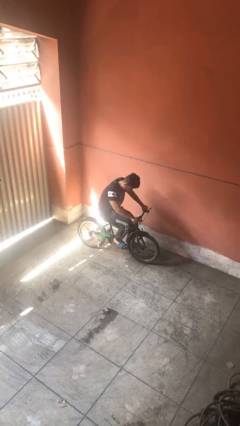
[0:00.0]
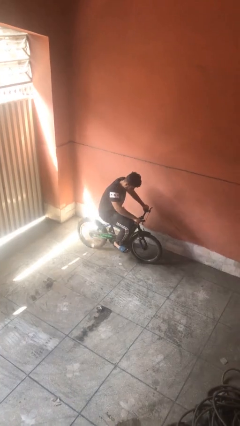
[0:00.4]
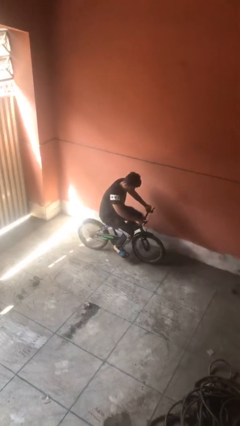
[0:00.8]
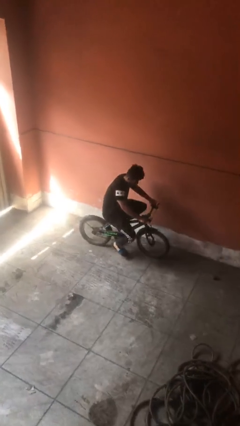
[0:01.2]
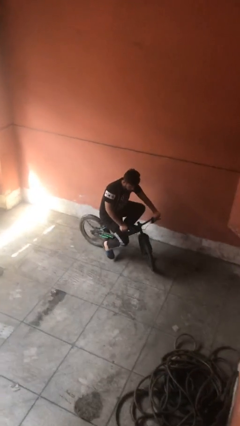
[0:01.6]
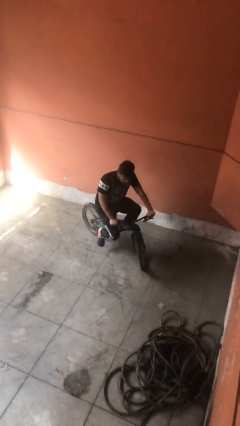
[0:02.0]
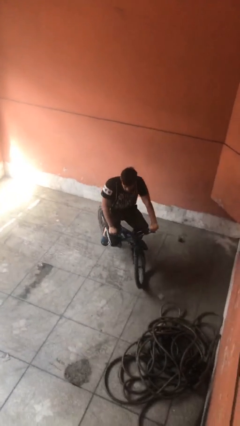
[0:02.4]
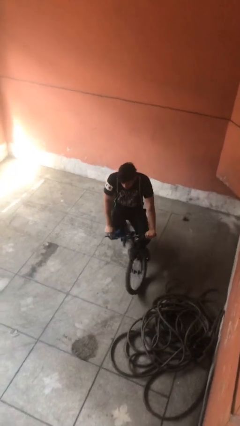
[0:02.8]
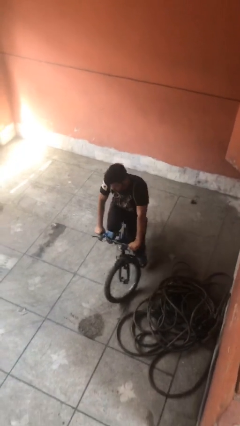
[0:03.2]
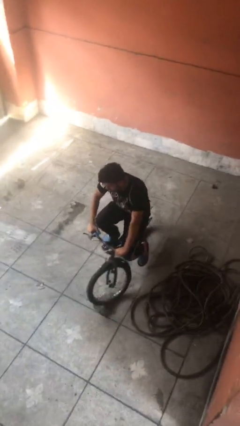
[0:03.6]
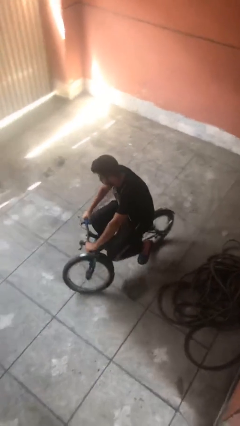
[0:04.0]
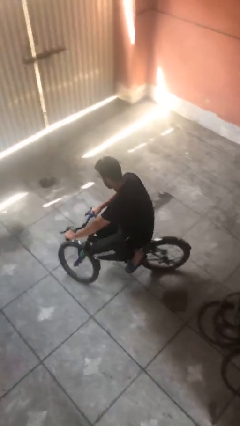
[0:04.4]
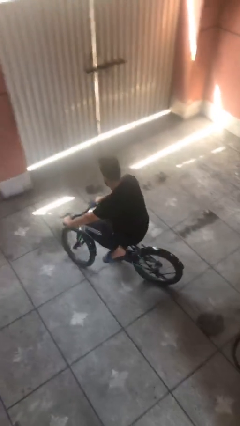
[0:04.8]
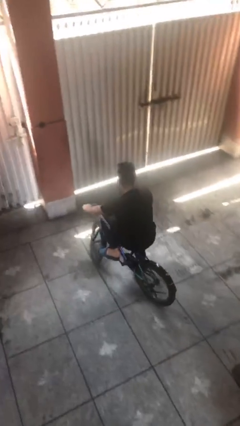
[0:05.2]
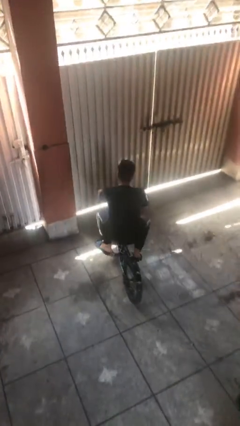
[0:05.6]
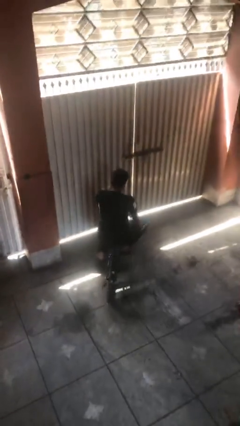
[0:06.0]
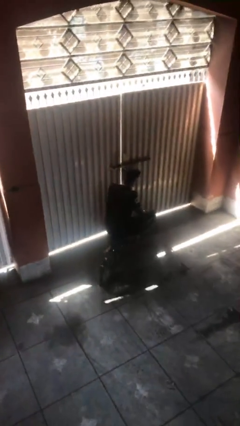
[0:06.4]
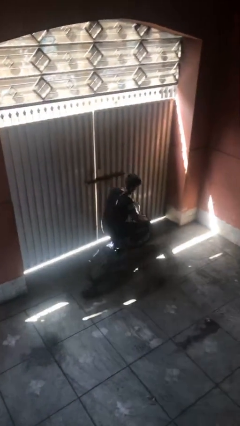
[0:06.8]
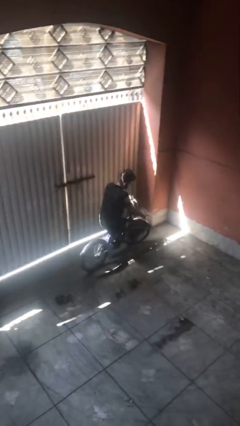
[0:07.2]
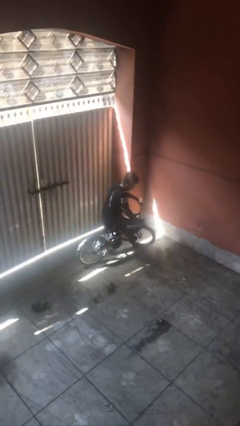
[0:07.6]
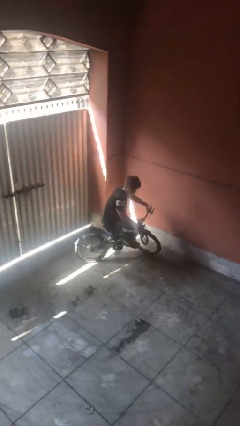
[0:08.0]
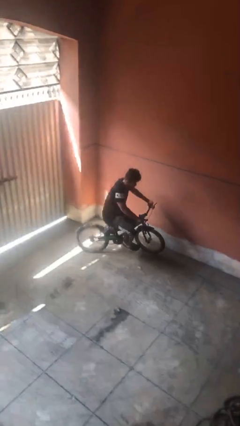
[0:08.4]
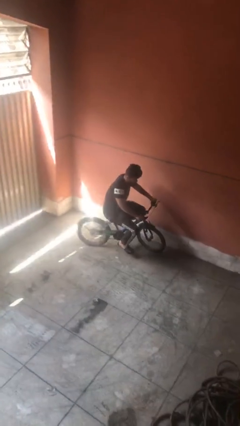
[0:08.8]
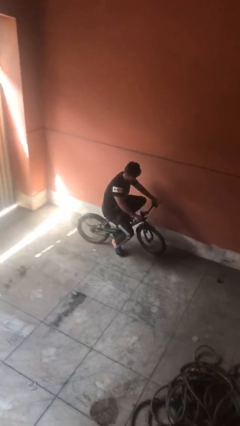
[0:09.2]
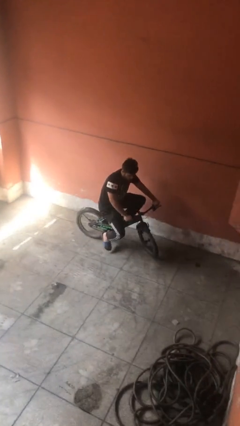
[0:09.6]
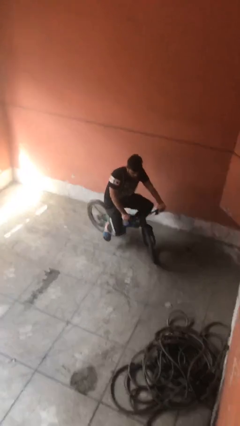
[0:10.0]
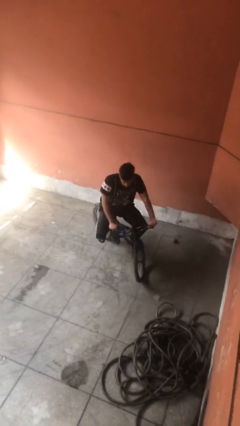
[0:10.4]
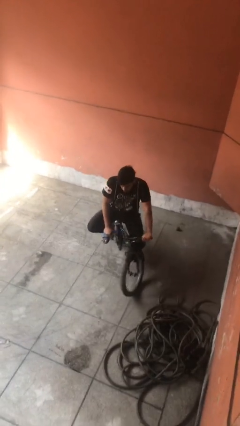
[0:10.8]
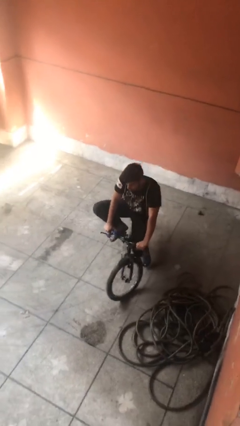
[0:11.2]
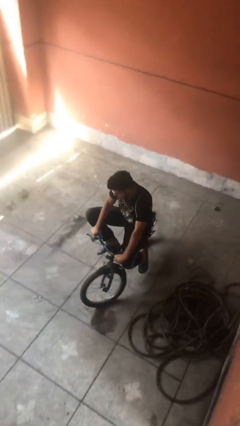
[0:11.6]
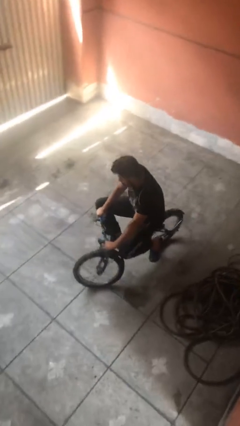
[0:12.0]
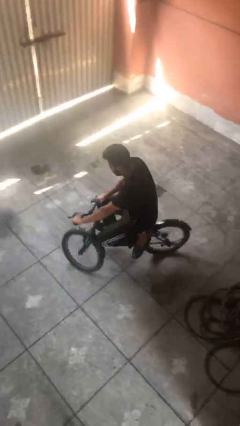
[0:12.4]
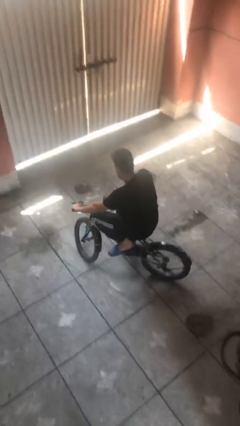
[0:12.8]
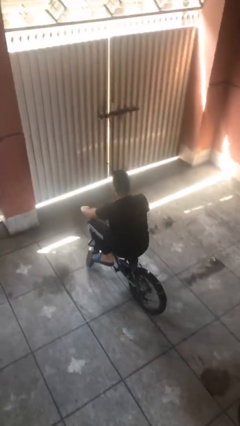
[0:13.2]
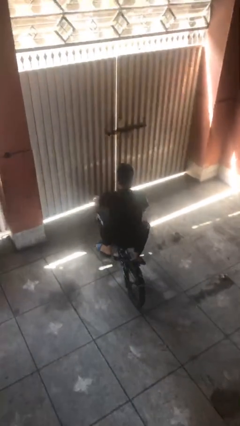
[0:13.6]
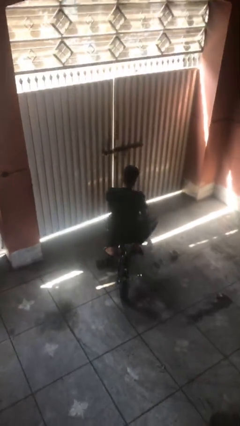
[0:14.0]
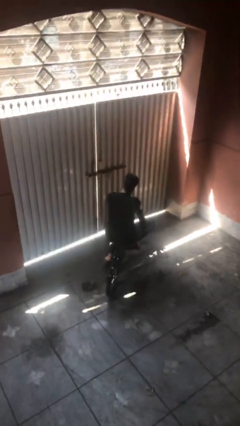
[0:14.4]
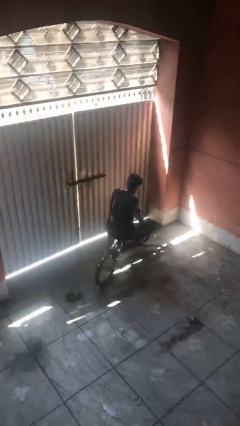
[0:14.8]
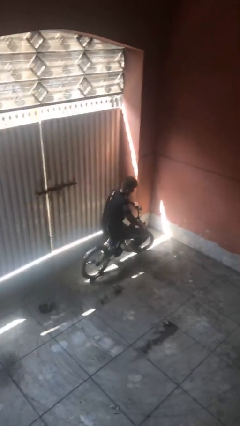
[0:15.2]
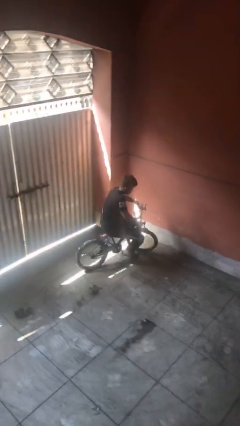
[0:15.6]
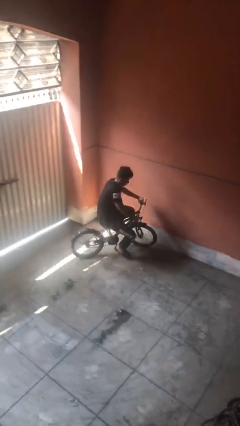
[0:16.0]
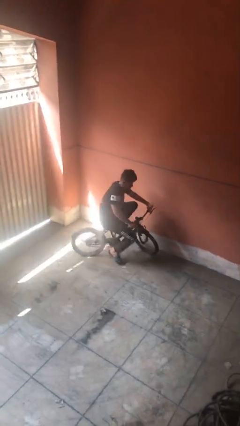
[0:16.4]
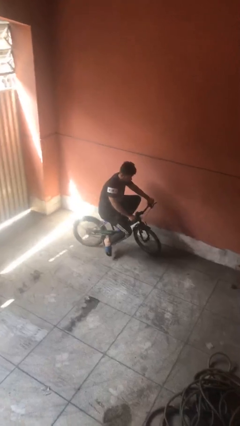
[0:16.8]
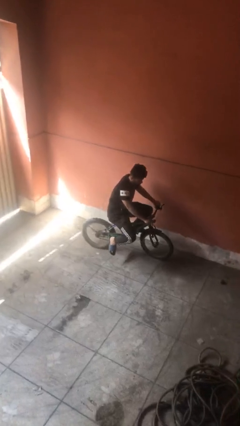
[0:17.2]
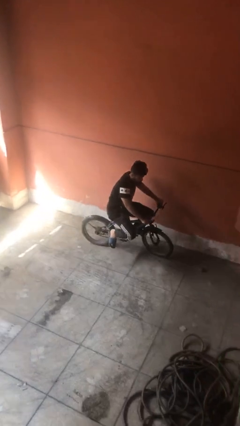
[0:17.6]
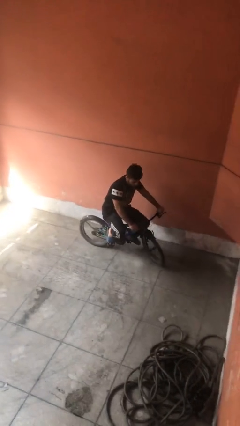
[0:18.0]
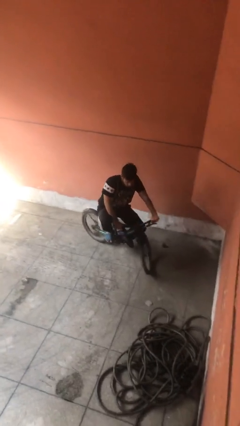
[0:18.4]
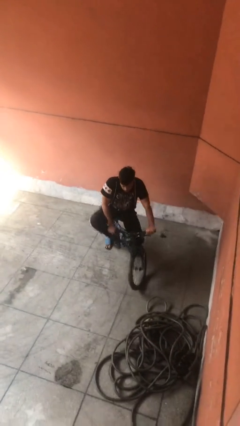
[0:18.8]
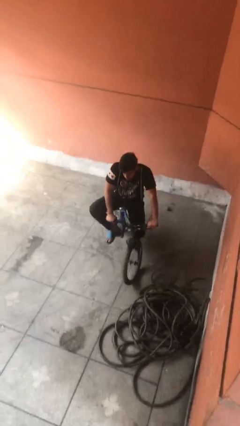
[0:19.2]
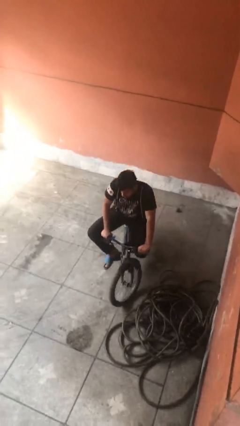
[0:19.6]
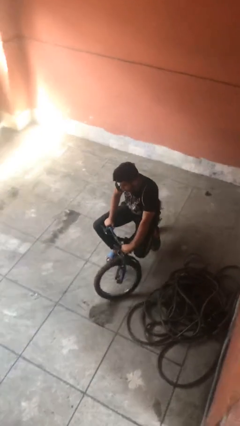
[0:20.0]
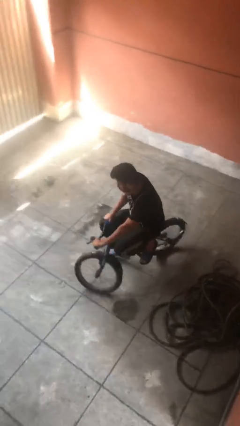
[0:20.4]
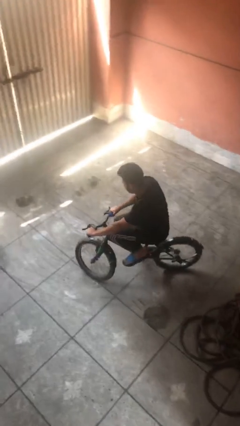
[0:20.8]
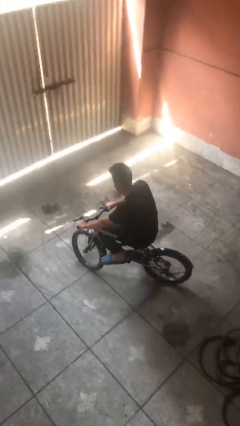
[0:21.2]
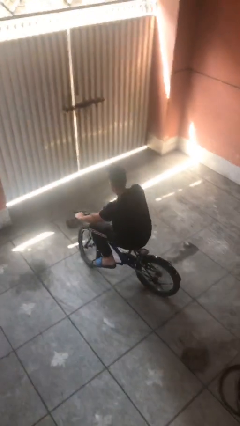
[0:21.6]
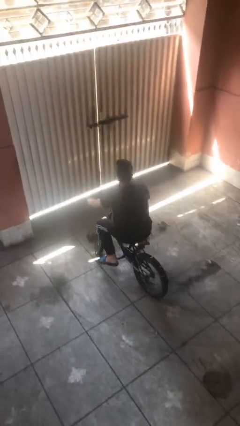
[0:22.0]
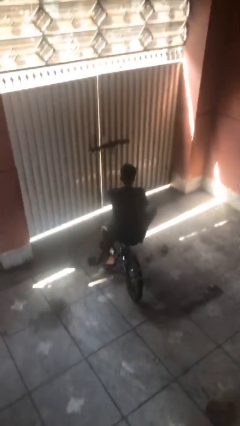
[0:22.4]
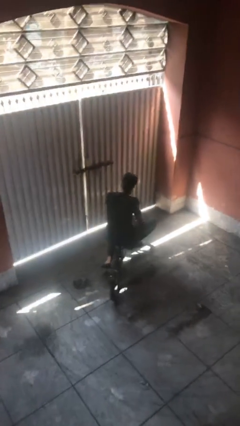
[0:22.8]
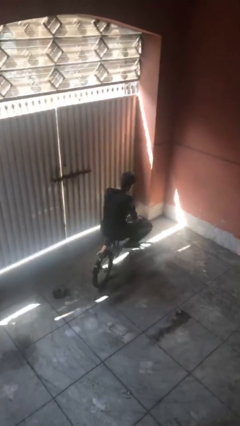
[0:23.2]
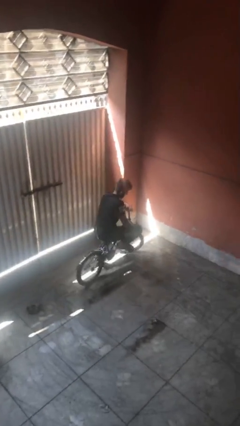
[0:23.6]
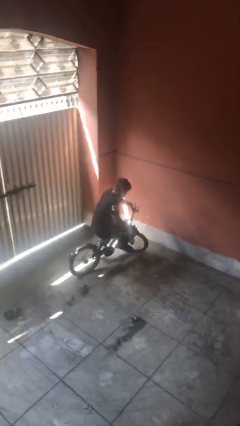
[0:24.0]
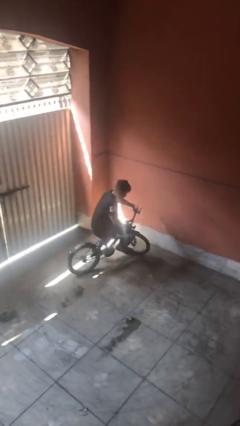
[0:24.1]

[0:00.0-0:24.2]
person rides bicycle

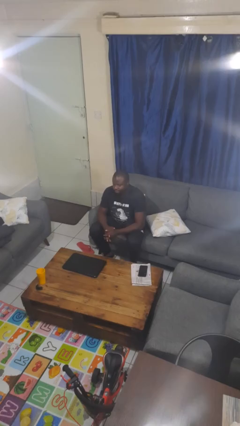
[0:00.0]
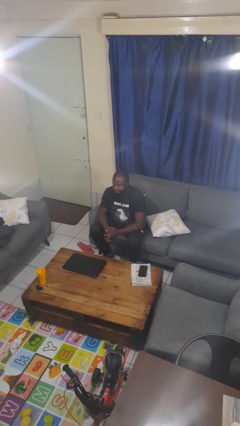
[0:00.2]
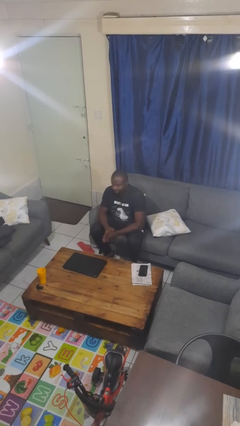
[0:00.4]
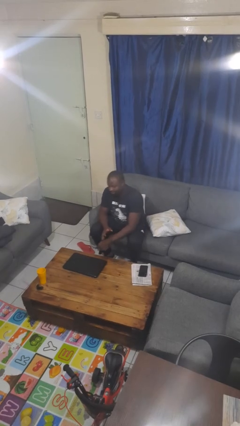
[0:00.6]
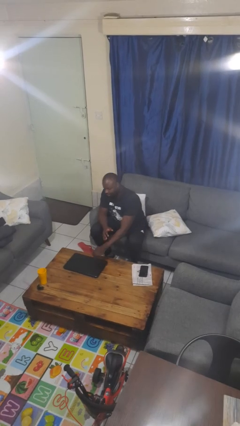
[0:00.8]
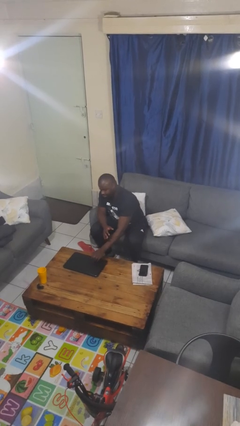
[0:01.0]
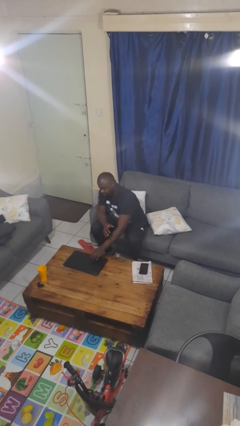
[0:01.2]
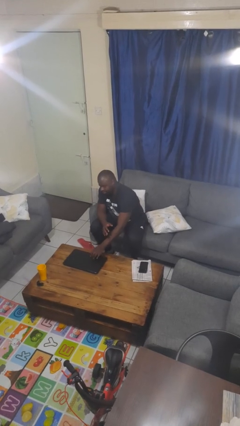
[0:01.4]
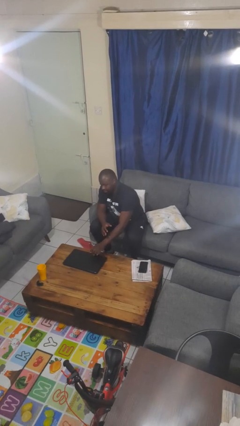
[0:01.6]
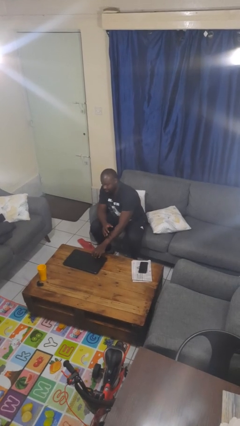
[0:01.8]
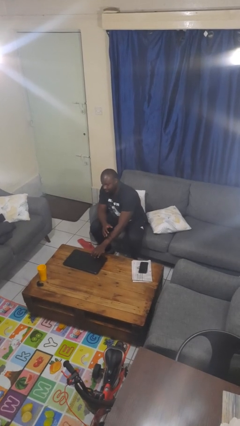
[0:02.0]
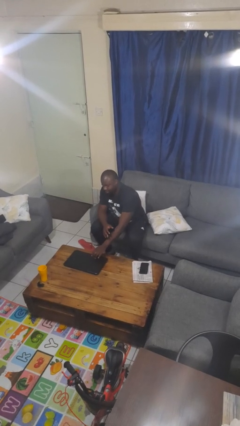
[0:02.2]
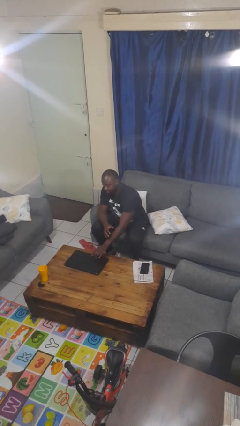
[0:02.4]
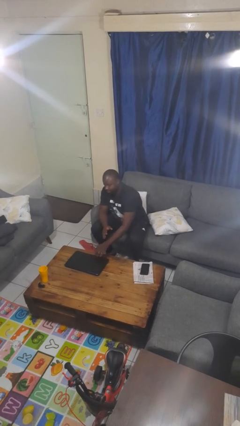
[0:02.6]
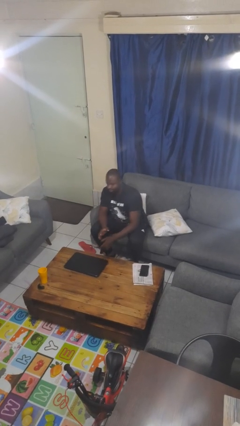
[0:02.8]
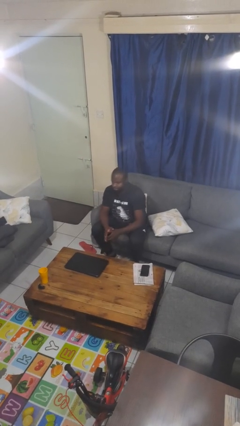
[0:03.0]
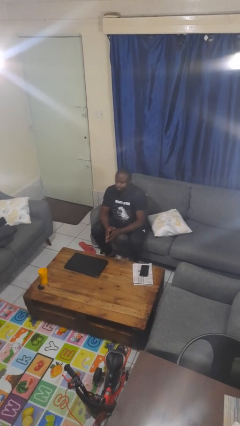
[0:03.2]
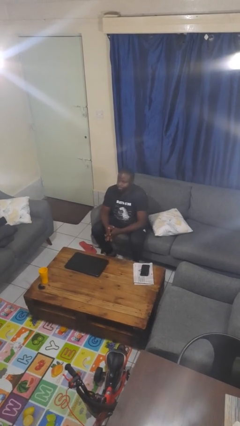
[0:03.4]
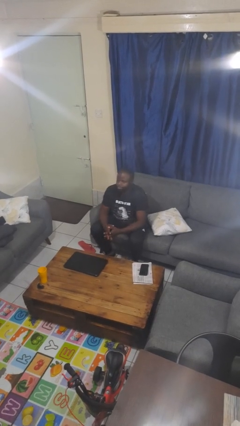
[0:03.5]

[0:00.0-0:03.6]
person taps object with finger

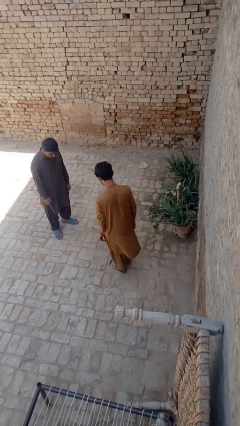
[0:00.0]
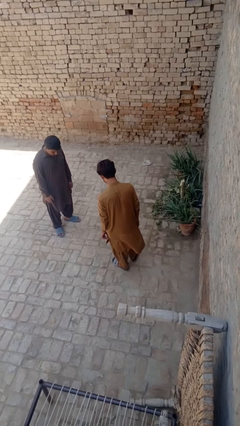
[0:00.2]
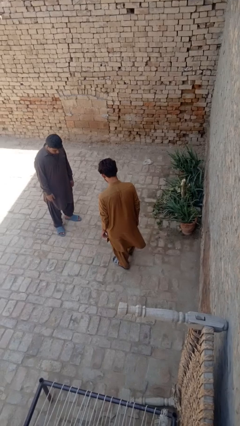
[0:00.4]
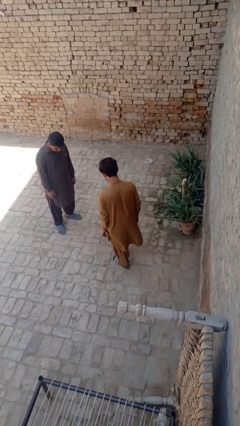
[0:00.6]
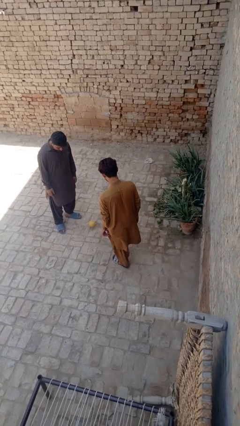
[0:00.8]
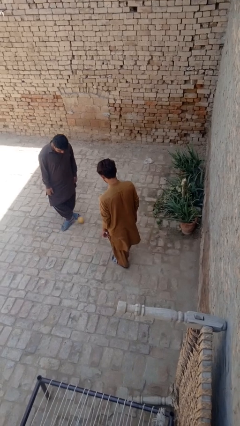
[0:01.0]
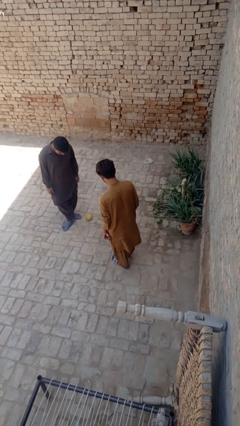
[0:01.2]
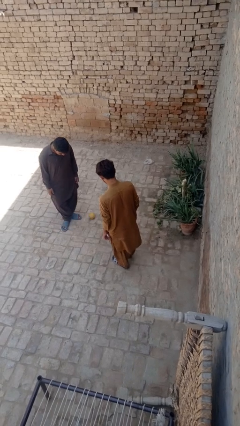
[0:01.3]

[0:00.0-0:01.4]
person kicks object to person

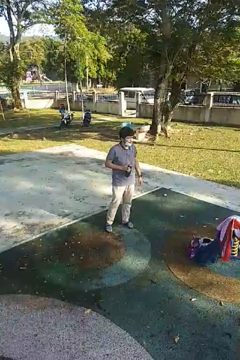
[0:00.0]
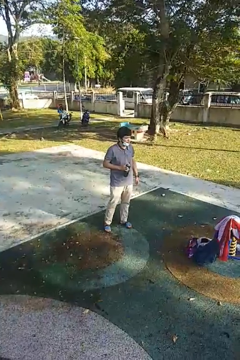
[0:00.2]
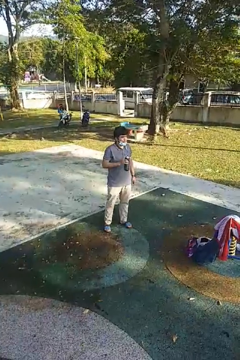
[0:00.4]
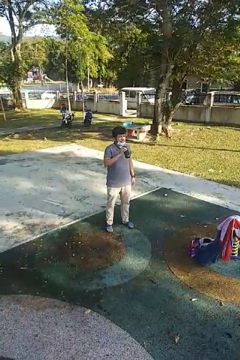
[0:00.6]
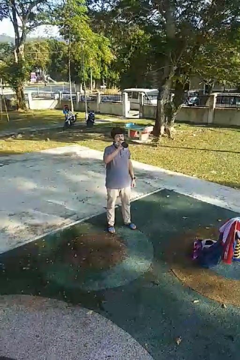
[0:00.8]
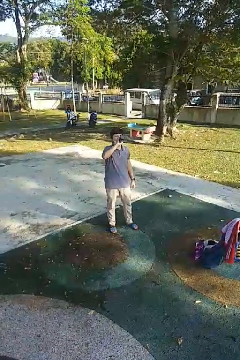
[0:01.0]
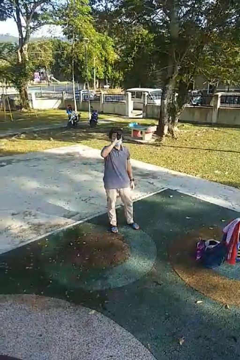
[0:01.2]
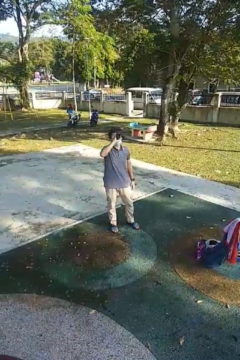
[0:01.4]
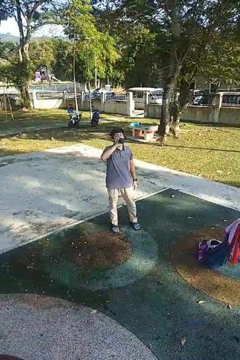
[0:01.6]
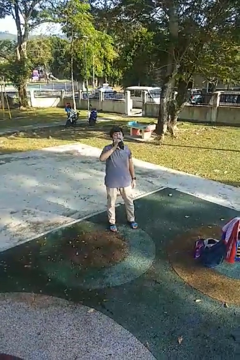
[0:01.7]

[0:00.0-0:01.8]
person drinks from bottle
